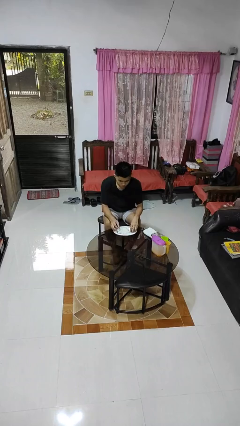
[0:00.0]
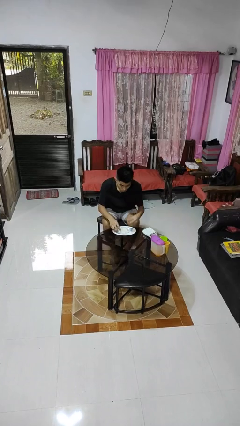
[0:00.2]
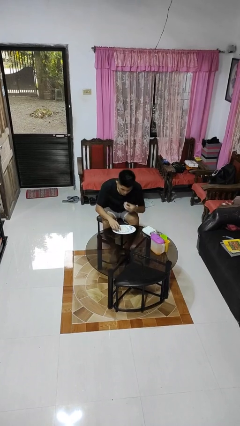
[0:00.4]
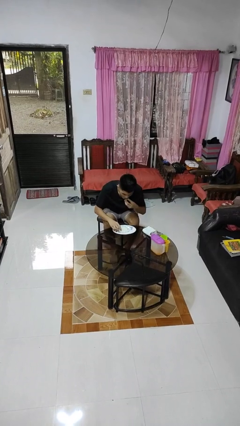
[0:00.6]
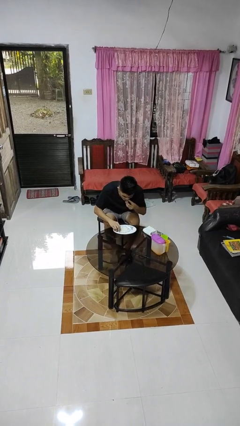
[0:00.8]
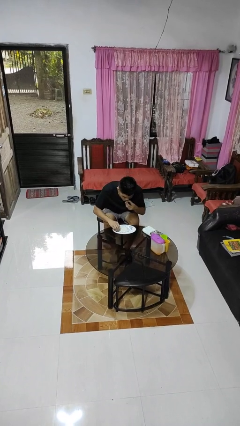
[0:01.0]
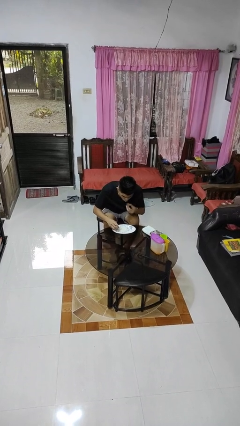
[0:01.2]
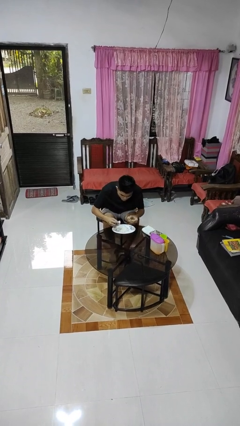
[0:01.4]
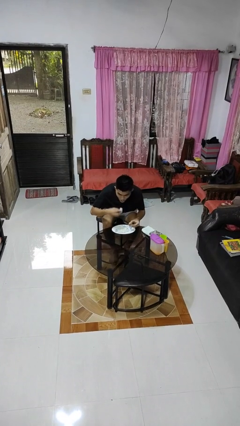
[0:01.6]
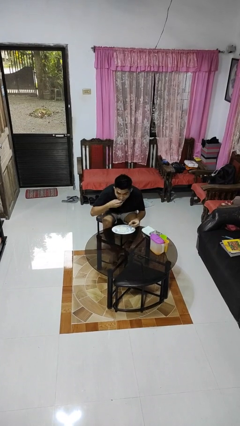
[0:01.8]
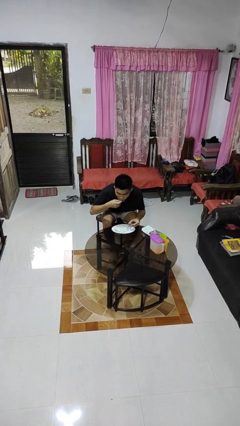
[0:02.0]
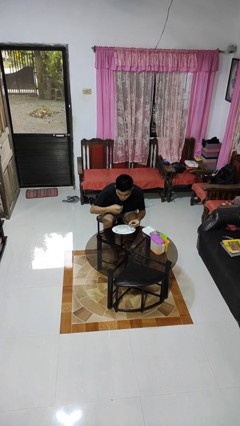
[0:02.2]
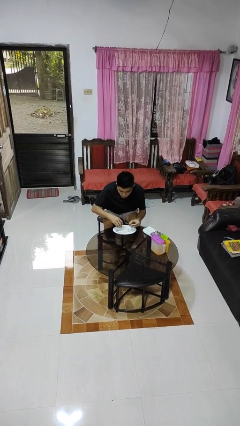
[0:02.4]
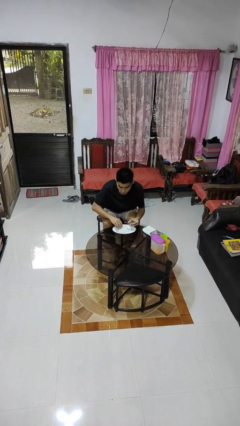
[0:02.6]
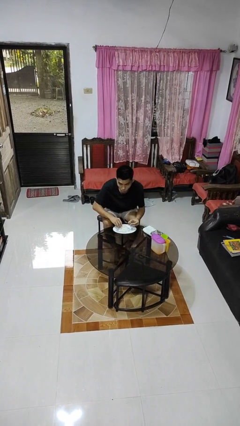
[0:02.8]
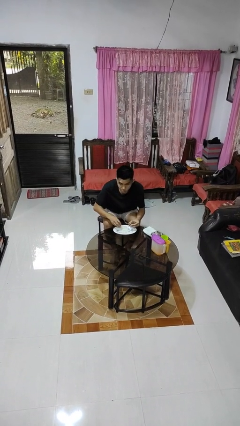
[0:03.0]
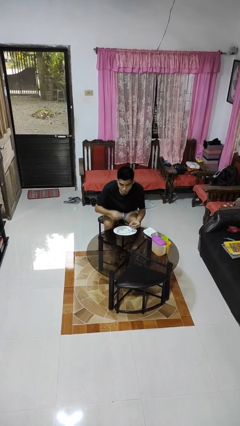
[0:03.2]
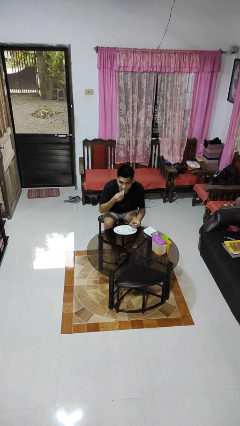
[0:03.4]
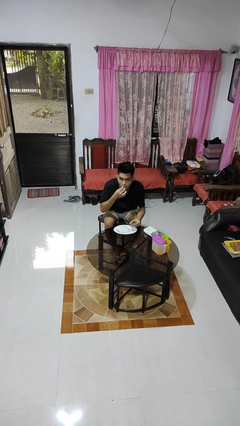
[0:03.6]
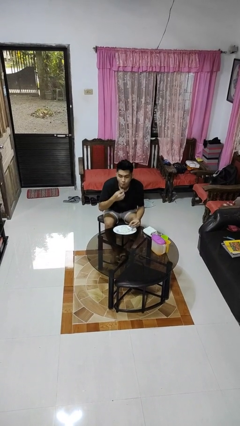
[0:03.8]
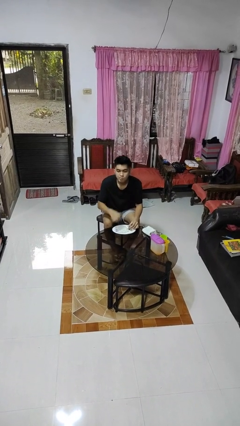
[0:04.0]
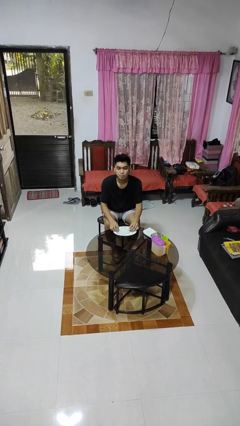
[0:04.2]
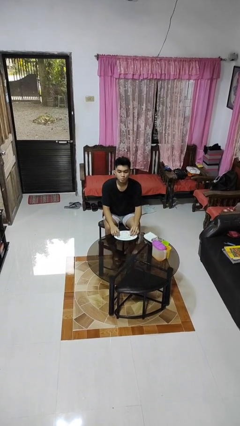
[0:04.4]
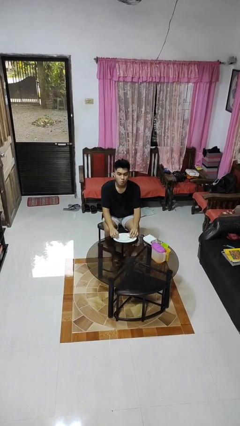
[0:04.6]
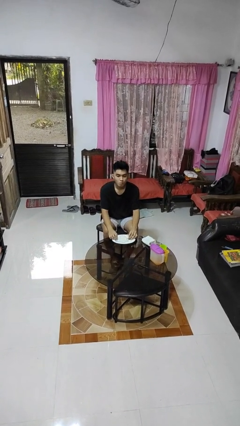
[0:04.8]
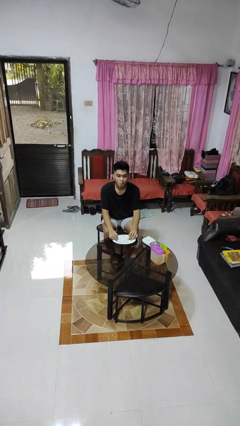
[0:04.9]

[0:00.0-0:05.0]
person eats with hands

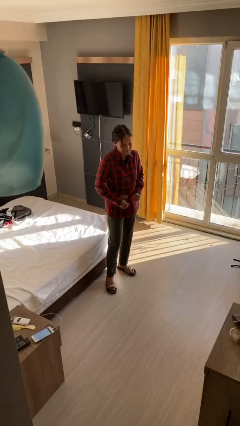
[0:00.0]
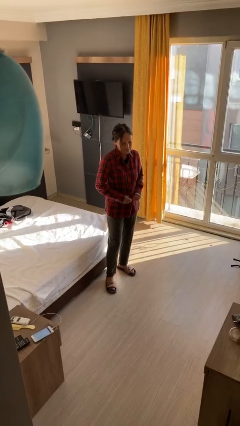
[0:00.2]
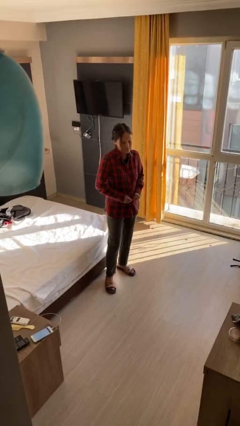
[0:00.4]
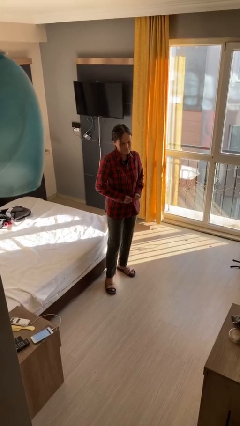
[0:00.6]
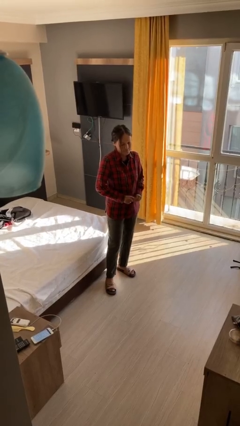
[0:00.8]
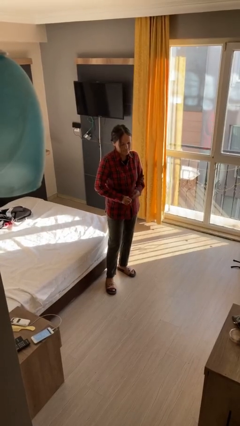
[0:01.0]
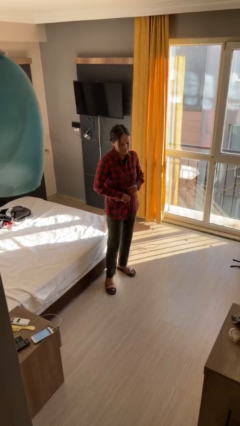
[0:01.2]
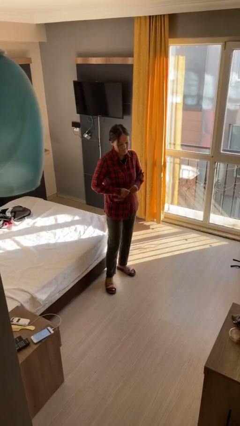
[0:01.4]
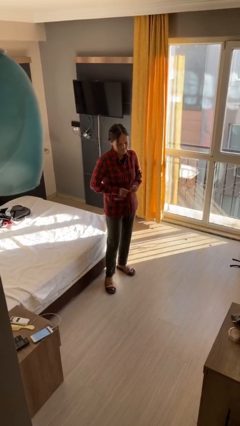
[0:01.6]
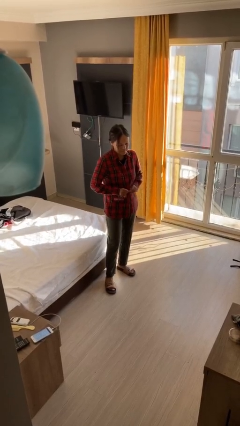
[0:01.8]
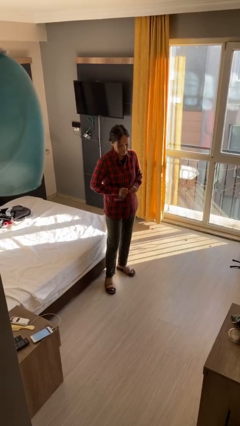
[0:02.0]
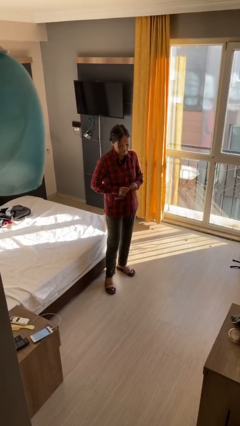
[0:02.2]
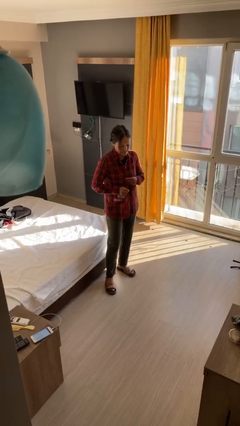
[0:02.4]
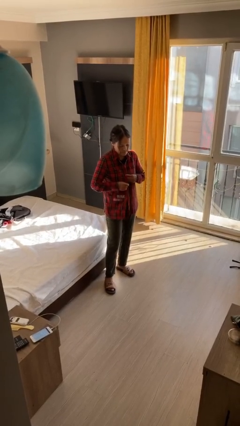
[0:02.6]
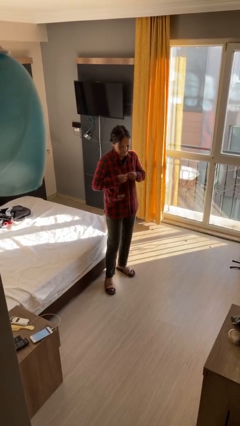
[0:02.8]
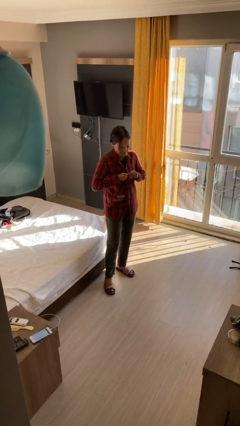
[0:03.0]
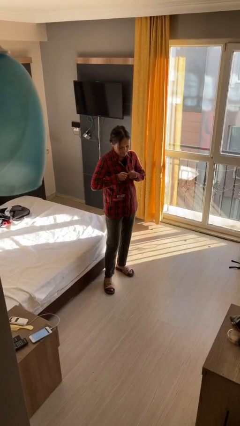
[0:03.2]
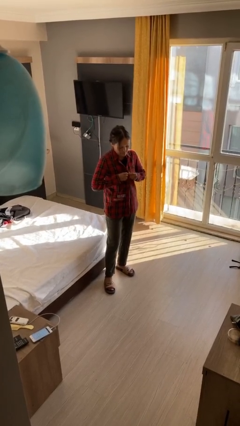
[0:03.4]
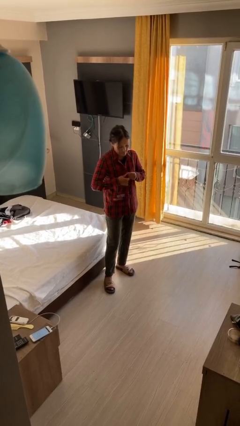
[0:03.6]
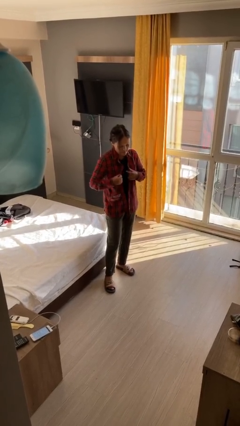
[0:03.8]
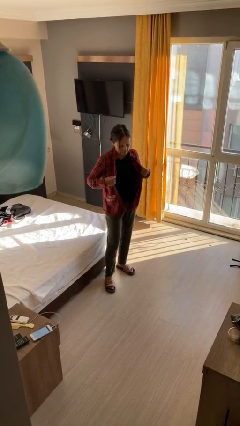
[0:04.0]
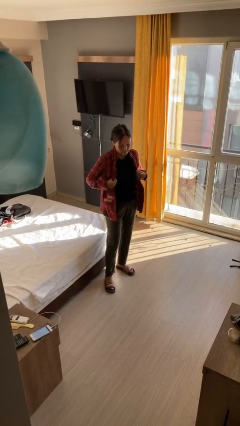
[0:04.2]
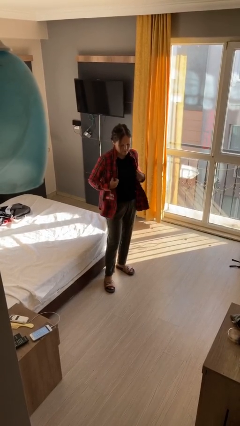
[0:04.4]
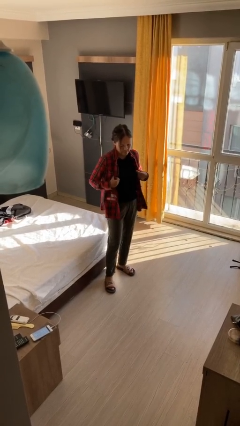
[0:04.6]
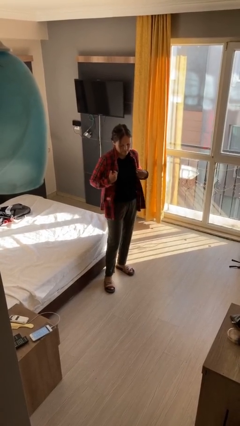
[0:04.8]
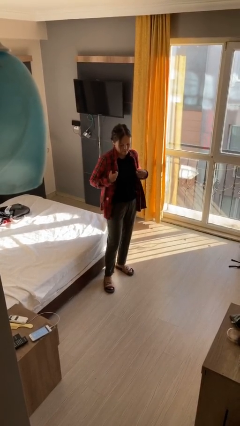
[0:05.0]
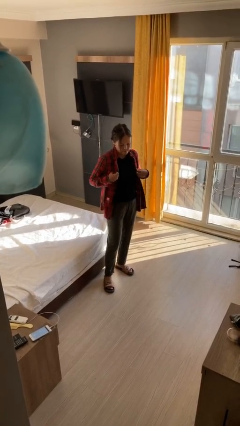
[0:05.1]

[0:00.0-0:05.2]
person unbuttons shirt

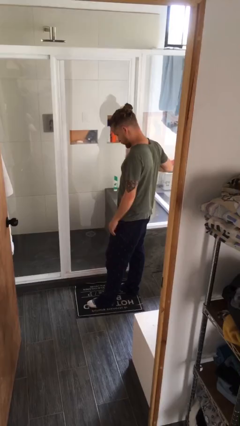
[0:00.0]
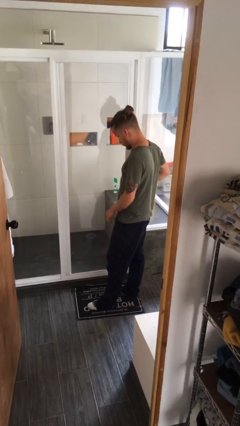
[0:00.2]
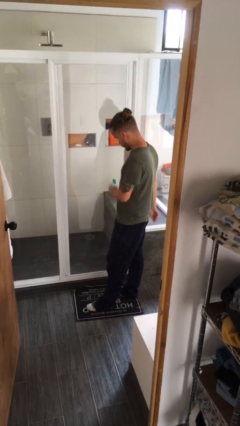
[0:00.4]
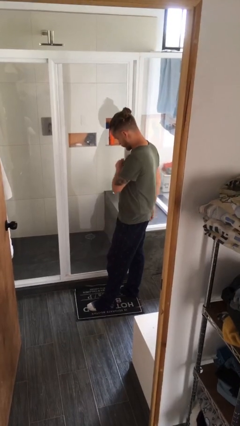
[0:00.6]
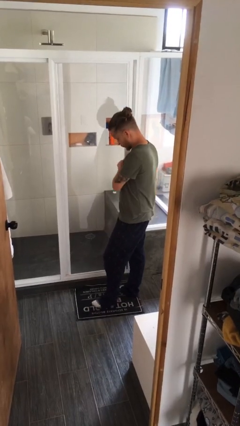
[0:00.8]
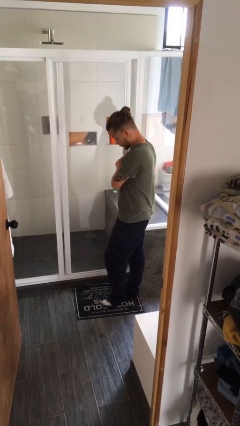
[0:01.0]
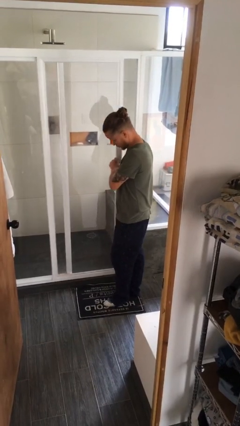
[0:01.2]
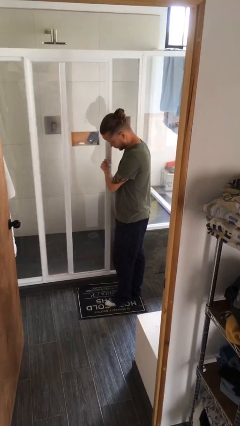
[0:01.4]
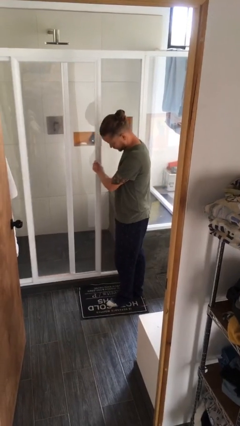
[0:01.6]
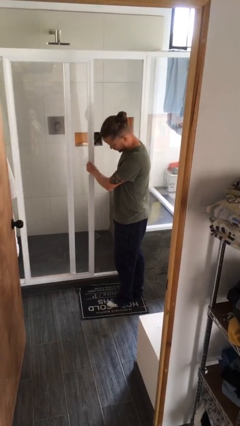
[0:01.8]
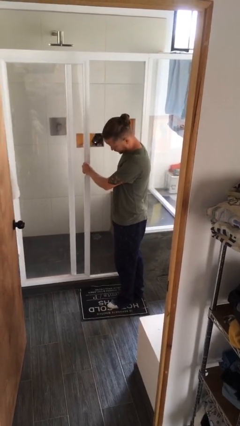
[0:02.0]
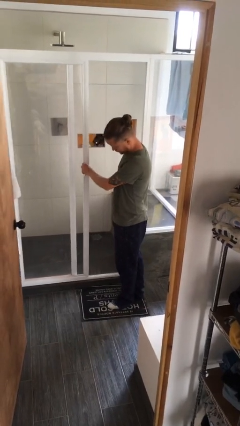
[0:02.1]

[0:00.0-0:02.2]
person opens sliding door

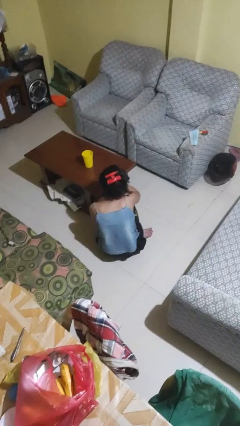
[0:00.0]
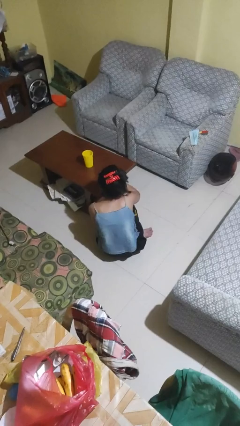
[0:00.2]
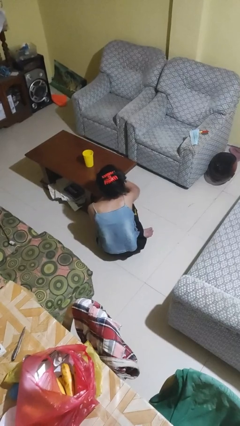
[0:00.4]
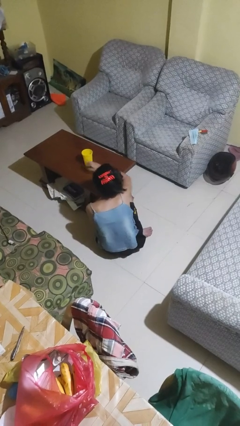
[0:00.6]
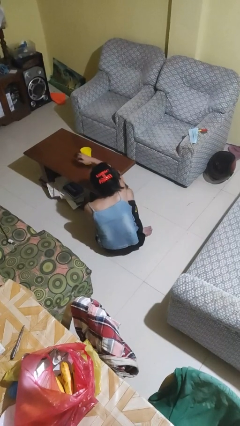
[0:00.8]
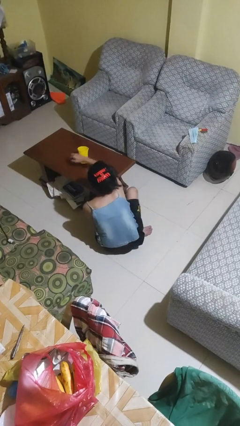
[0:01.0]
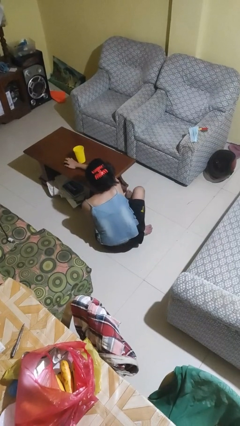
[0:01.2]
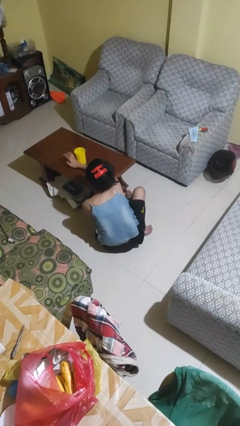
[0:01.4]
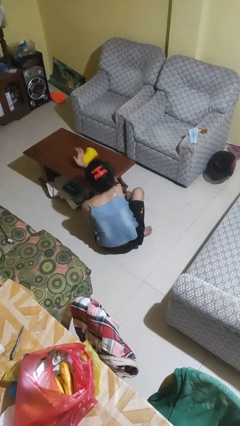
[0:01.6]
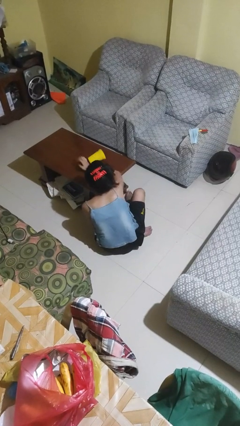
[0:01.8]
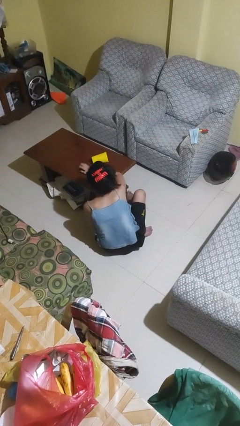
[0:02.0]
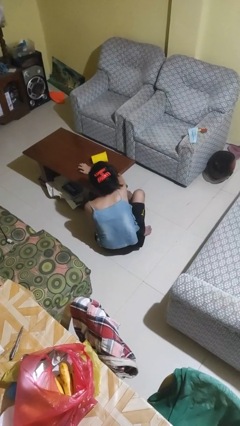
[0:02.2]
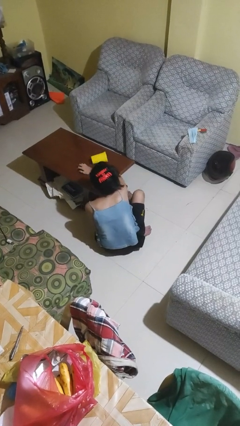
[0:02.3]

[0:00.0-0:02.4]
person knocks over glass

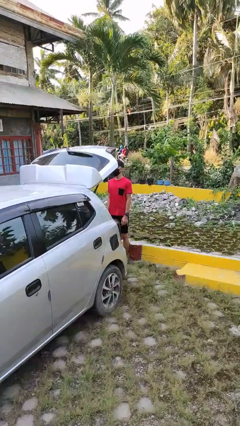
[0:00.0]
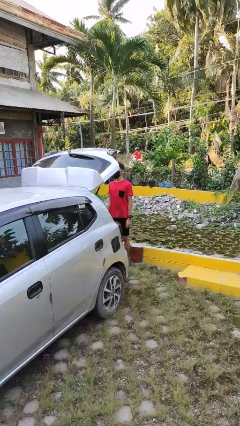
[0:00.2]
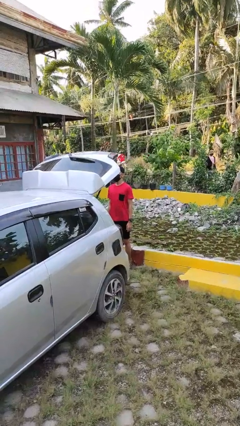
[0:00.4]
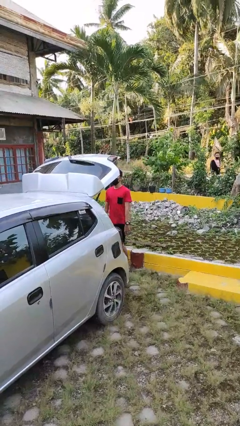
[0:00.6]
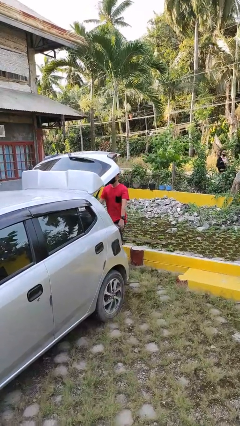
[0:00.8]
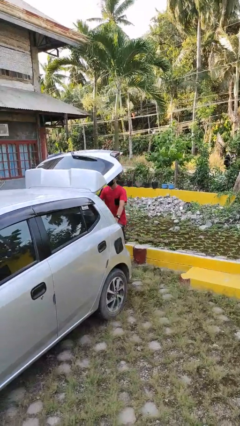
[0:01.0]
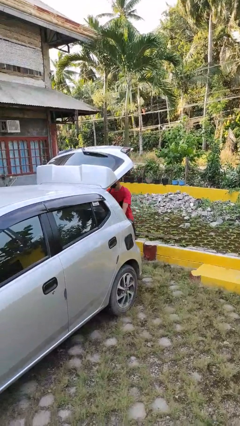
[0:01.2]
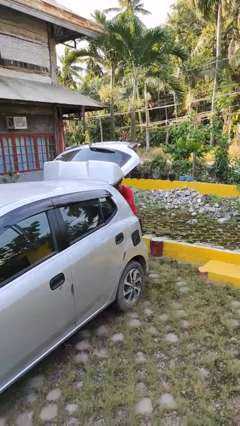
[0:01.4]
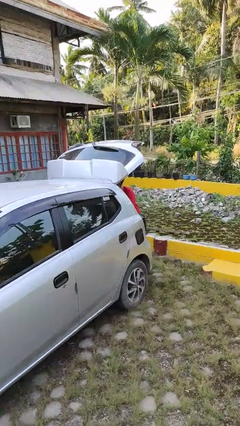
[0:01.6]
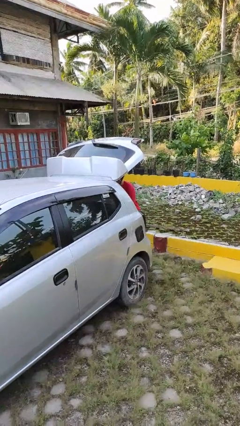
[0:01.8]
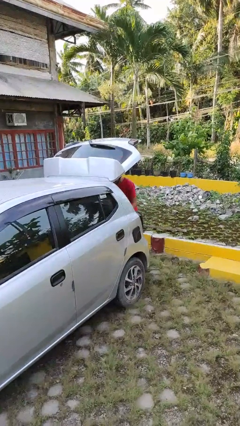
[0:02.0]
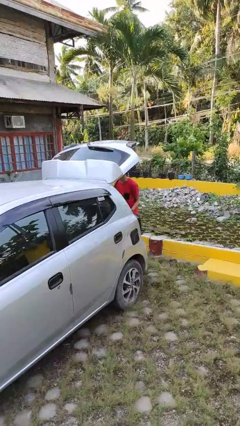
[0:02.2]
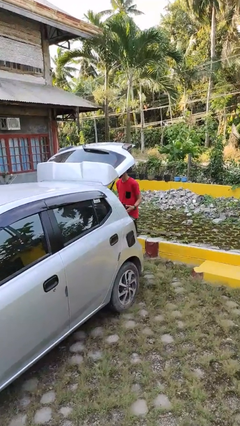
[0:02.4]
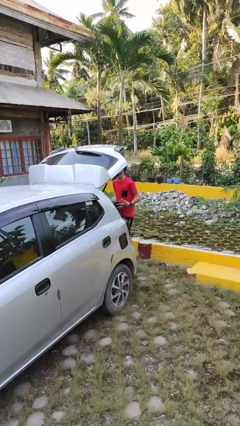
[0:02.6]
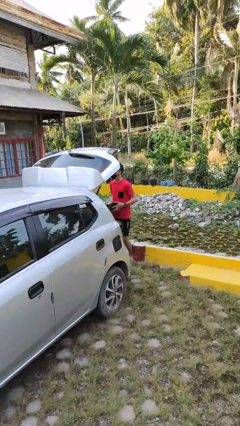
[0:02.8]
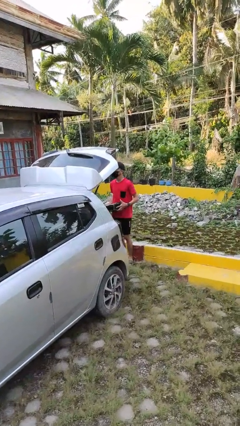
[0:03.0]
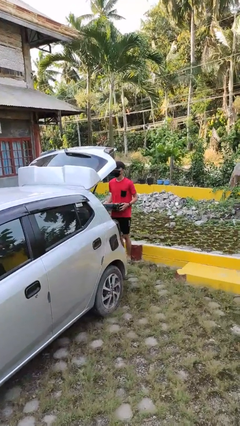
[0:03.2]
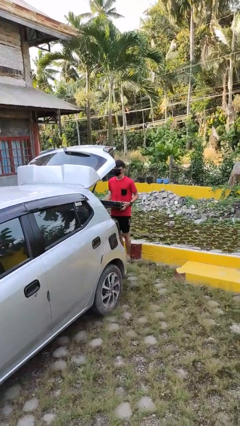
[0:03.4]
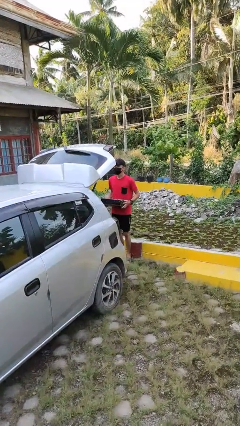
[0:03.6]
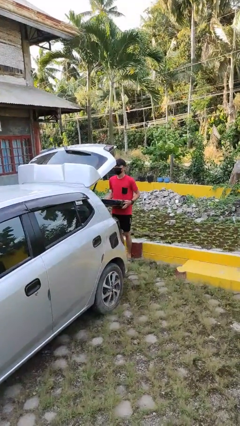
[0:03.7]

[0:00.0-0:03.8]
person unloads car
